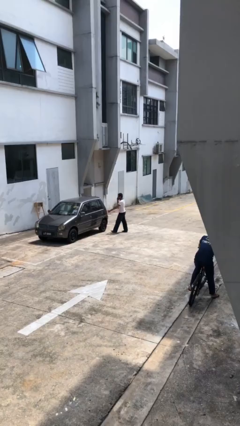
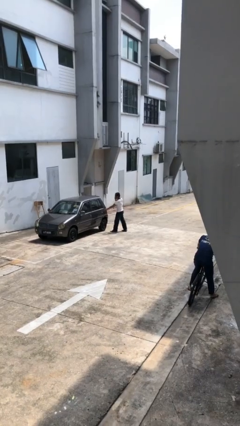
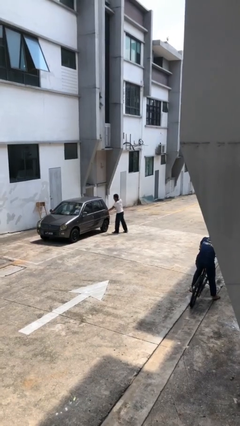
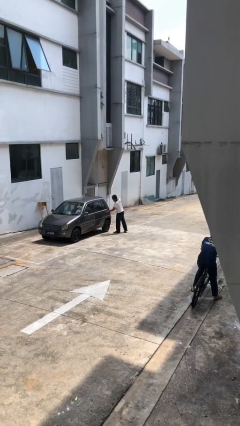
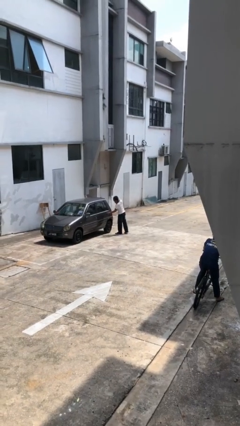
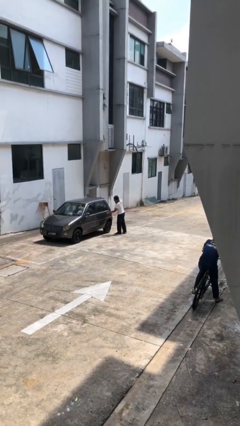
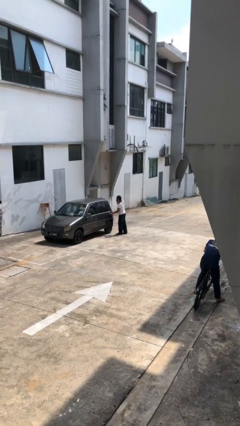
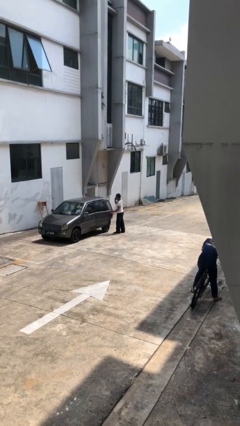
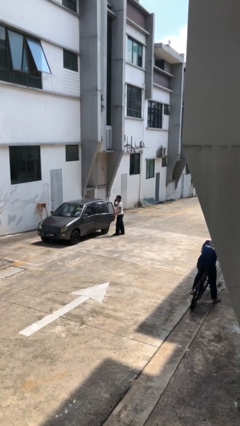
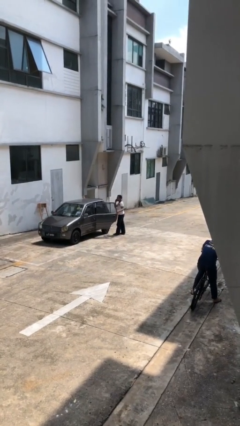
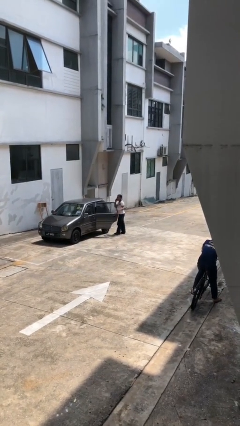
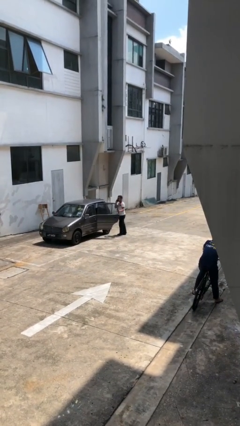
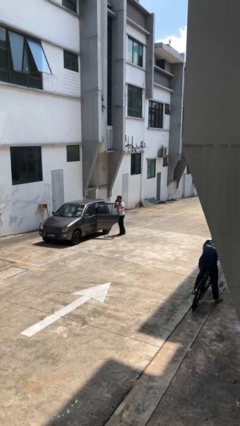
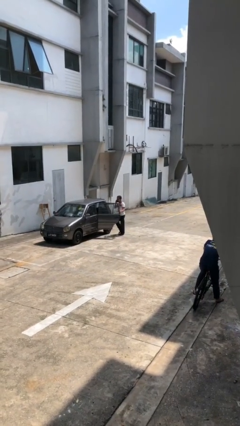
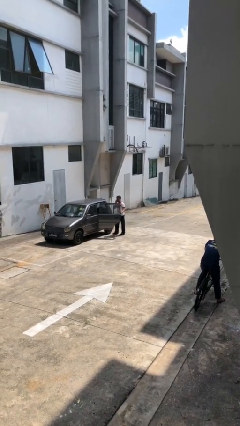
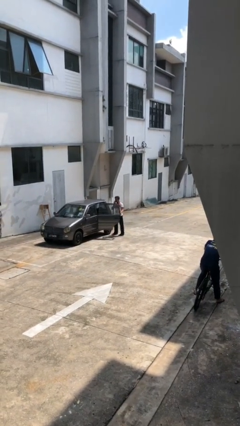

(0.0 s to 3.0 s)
person opens car door

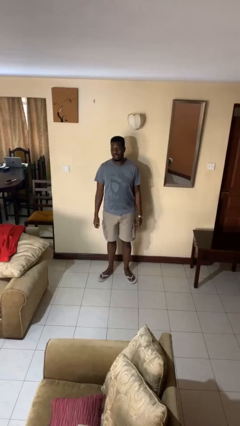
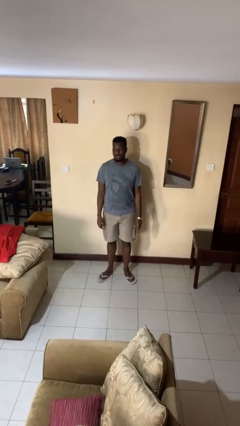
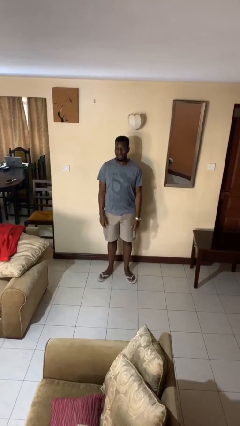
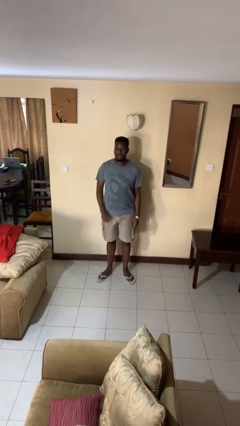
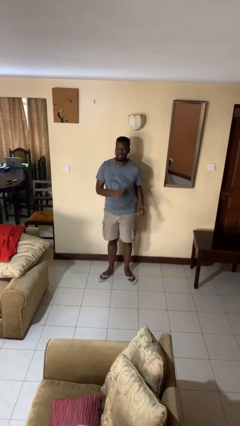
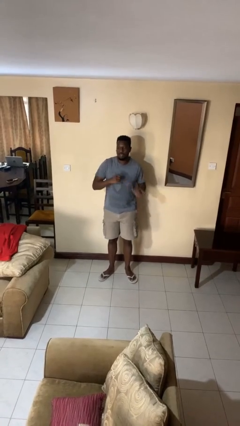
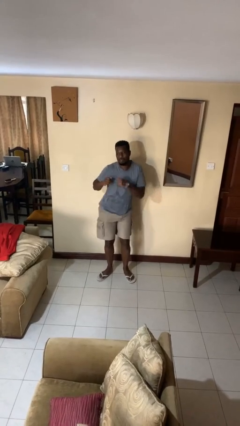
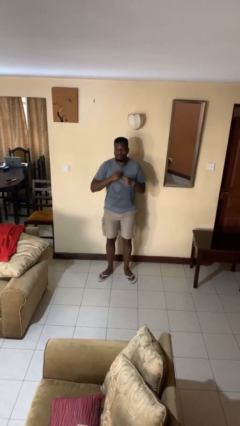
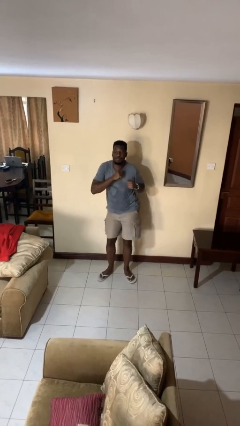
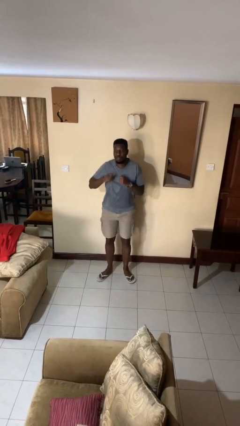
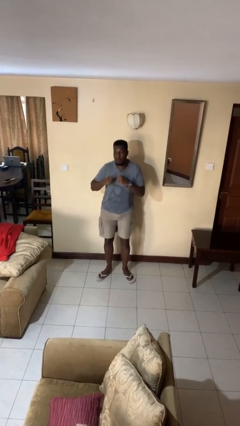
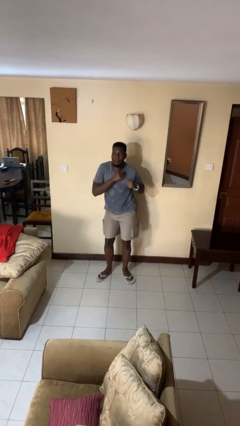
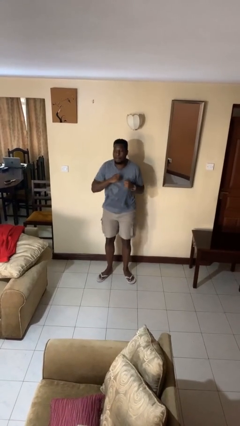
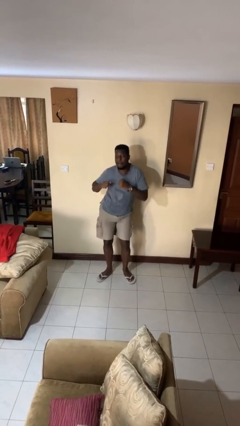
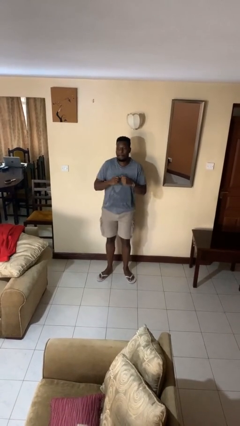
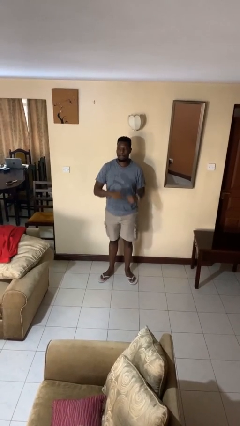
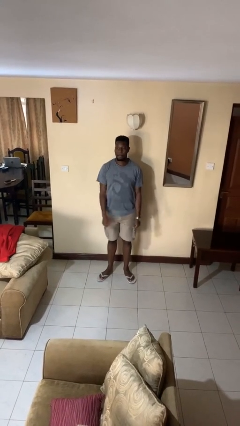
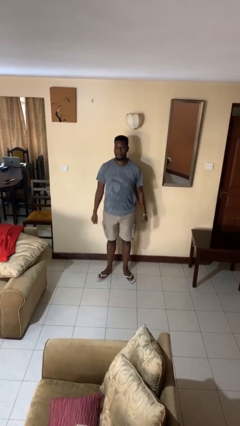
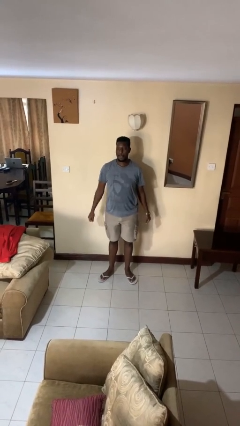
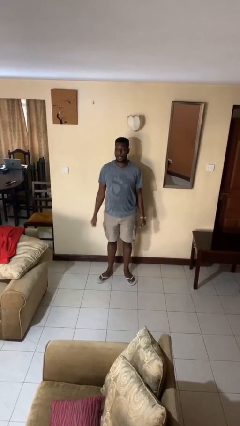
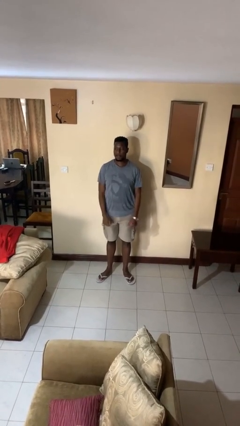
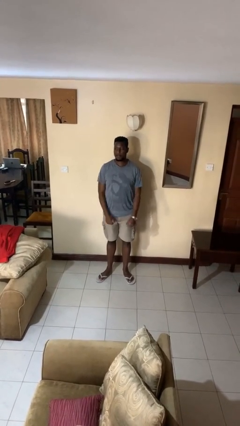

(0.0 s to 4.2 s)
person wiggles hips

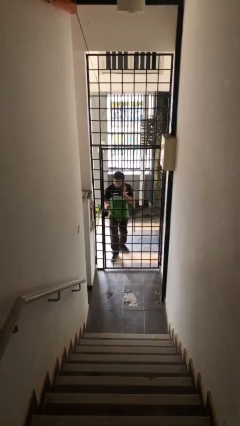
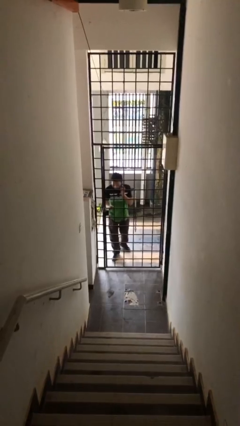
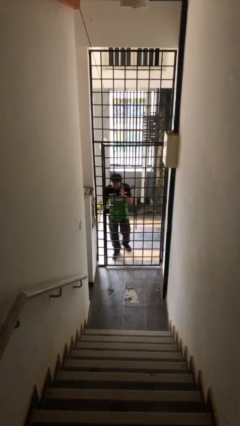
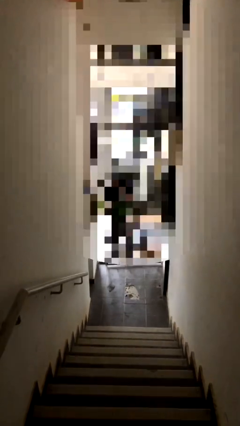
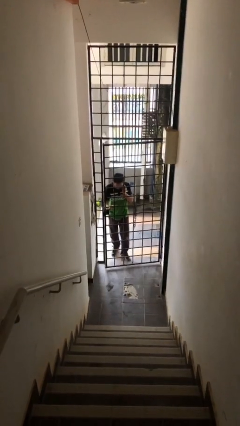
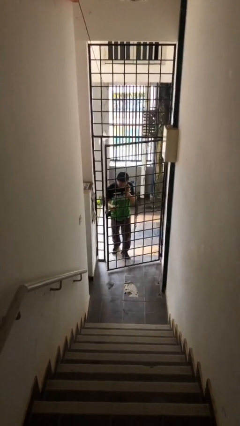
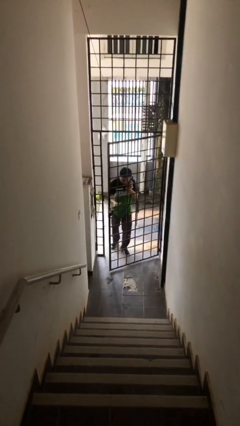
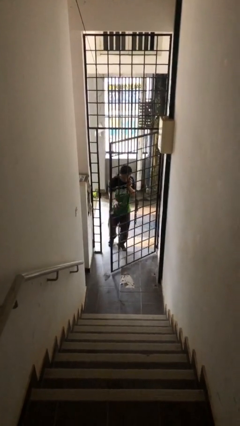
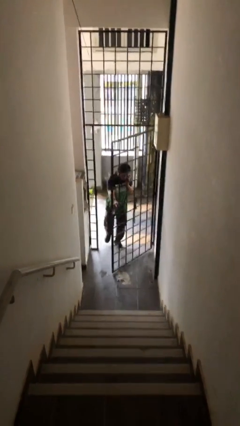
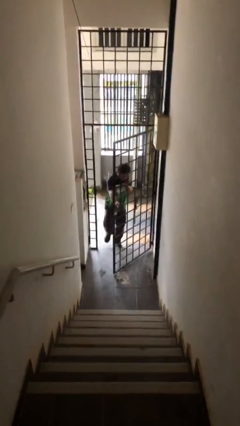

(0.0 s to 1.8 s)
person opens facility door

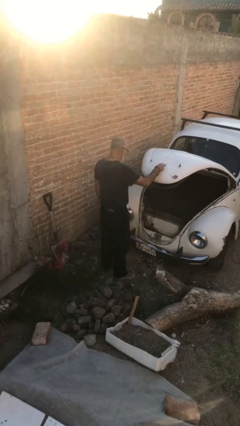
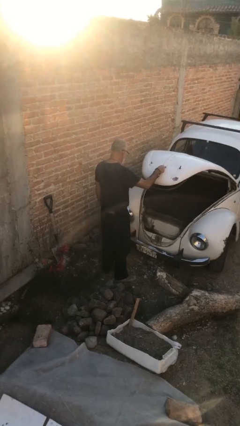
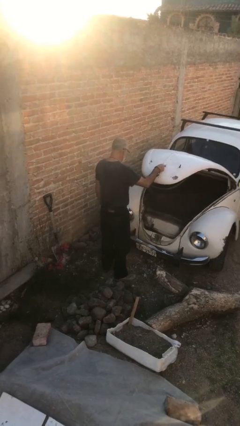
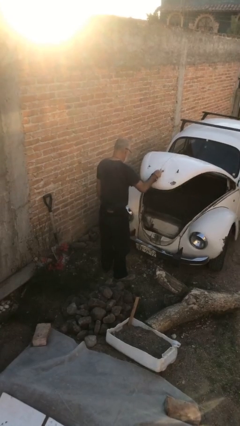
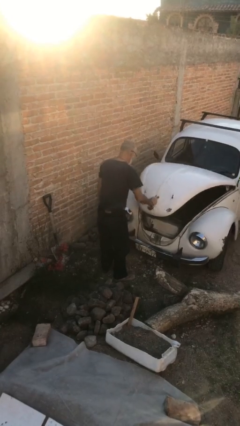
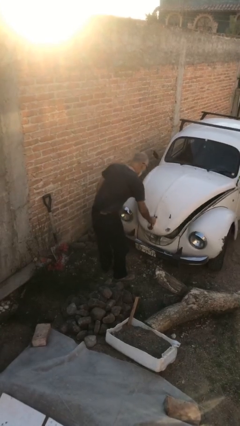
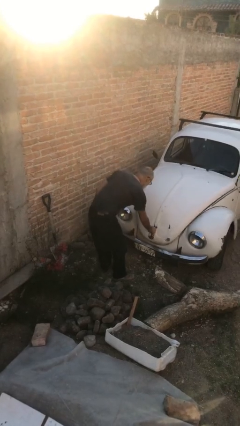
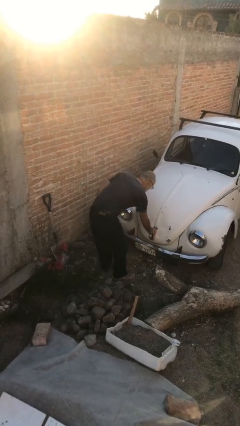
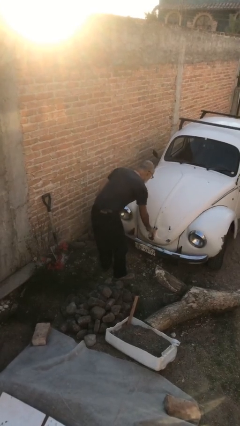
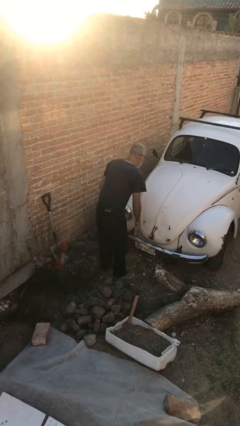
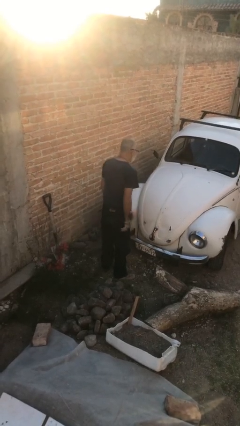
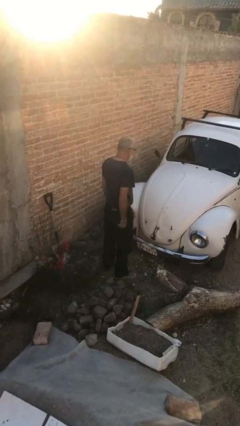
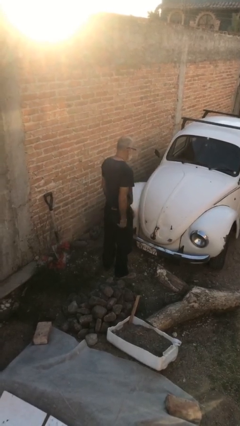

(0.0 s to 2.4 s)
person closes car trunk

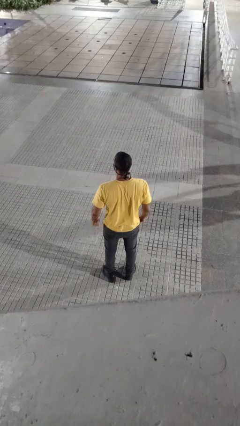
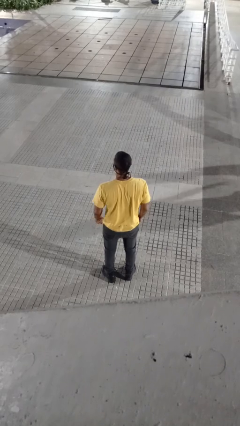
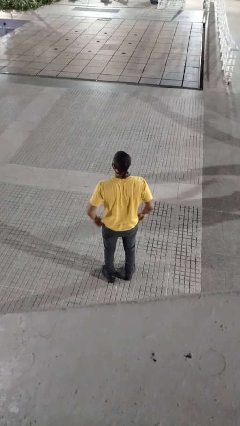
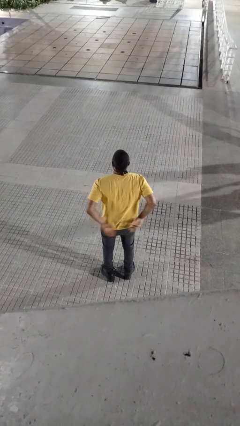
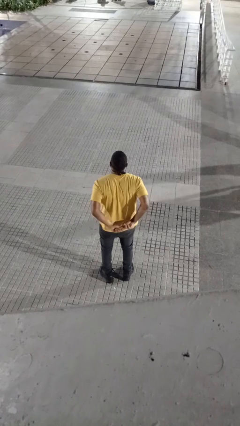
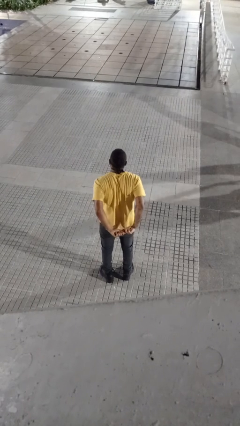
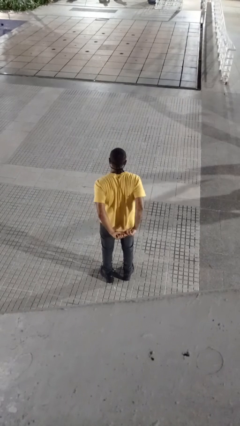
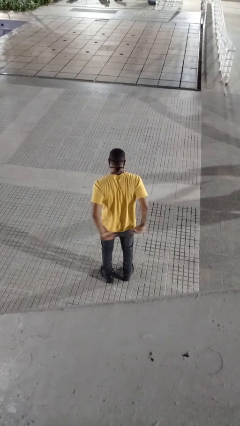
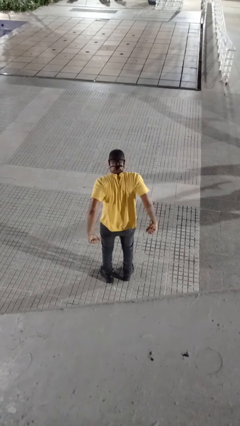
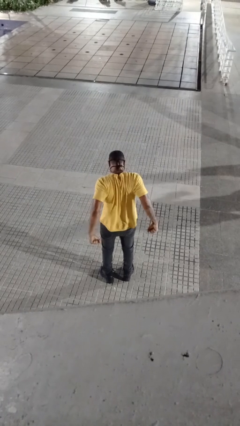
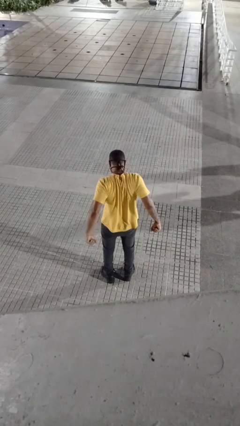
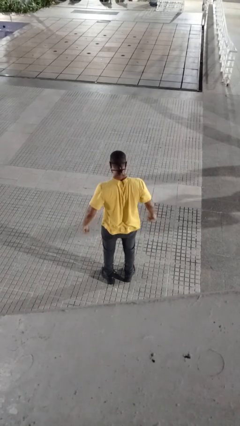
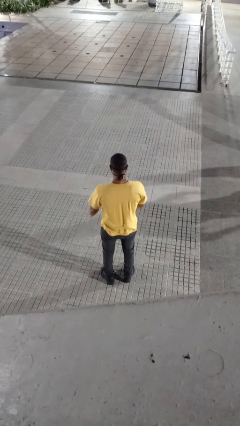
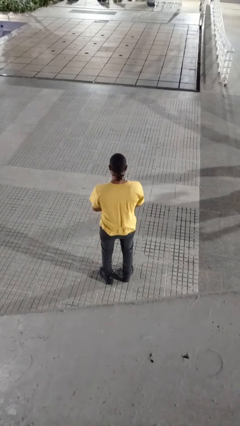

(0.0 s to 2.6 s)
person stretches back

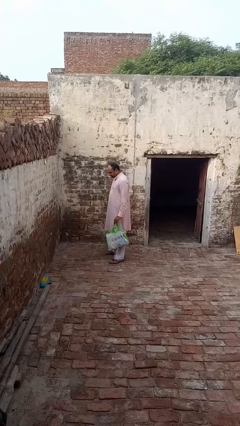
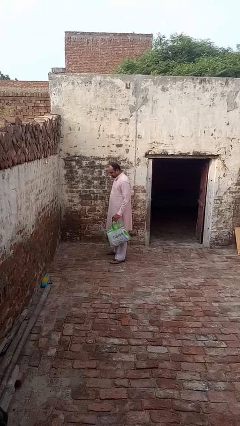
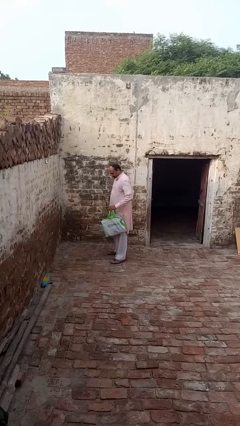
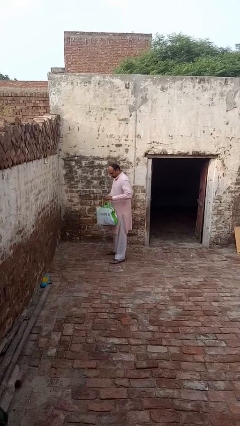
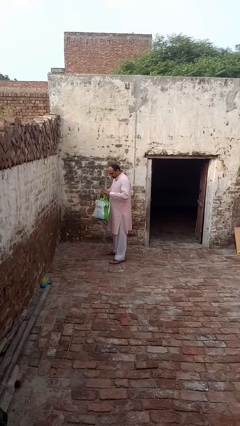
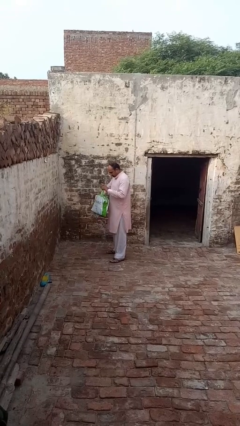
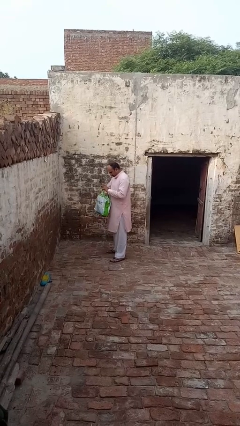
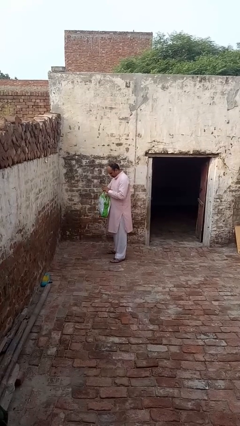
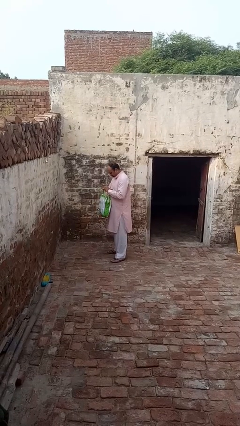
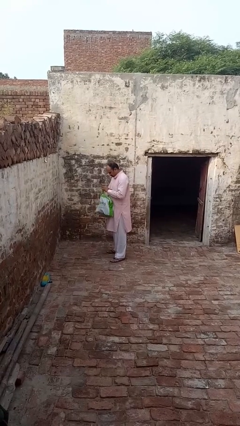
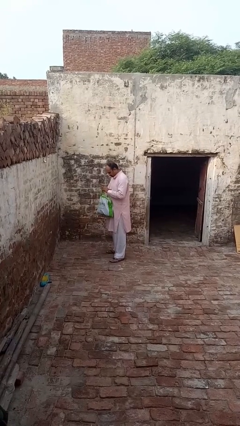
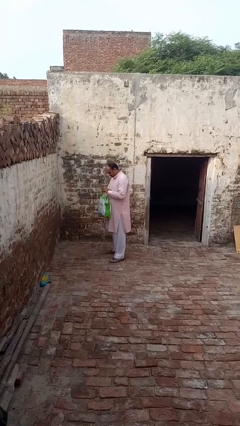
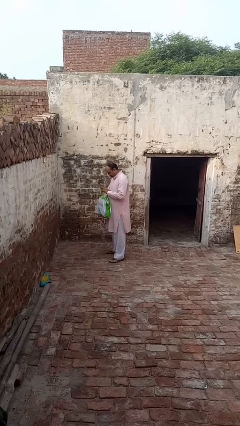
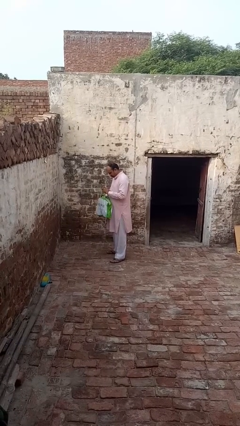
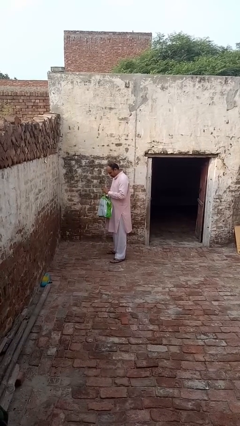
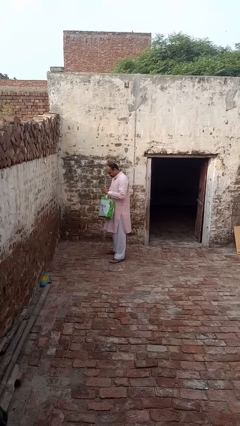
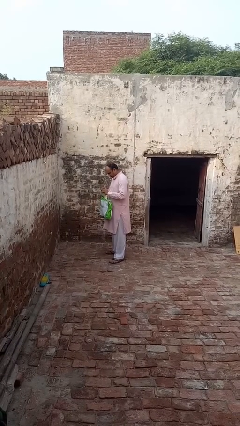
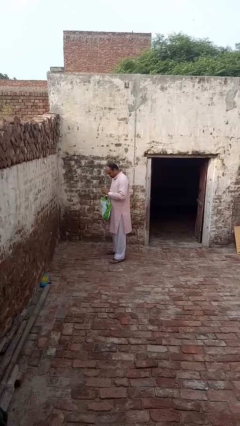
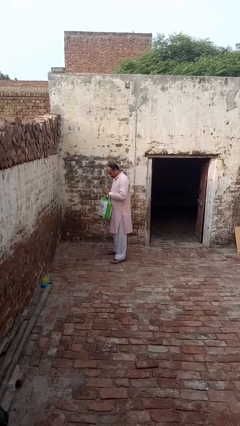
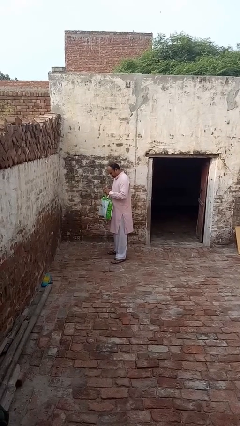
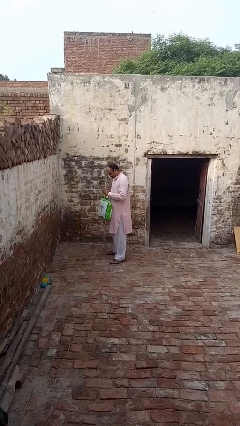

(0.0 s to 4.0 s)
person searches in bag
